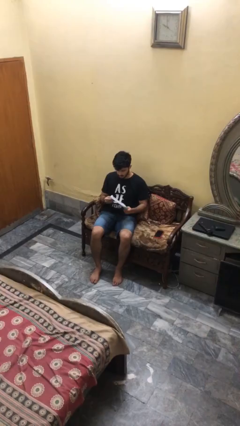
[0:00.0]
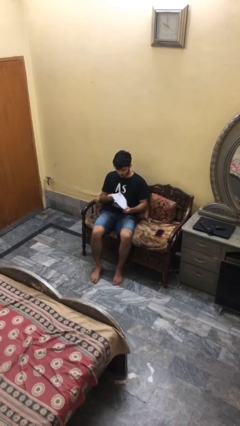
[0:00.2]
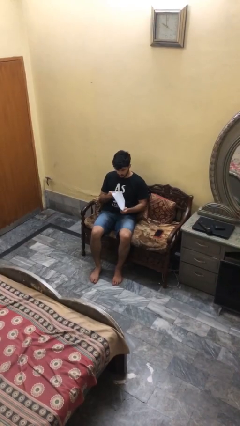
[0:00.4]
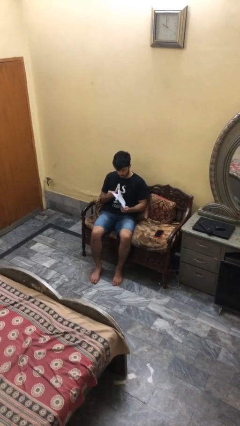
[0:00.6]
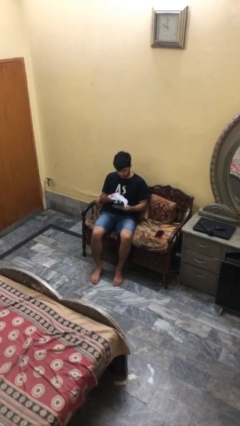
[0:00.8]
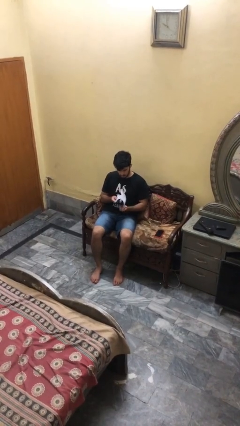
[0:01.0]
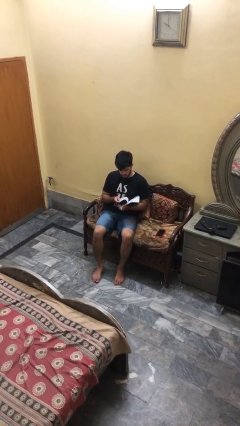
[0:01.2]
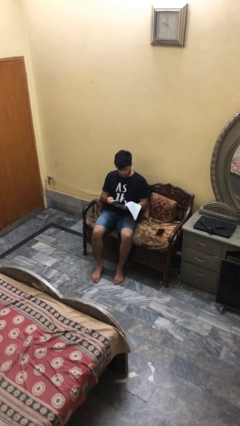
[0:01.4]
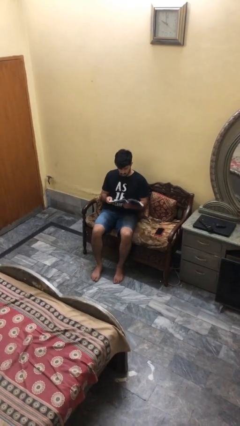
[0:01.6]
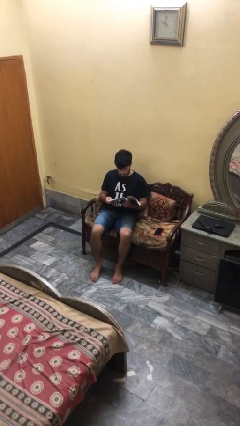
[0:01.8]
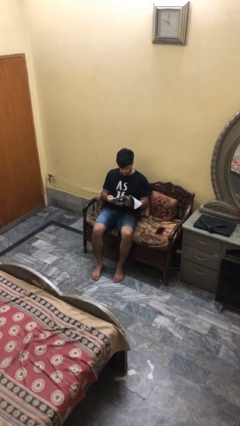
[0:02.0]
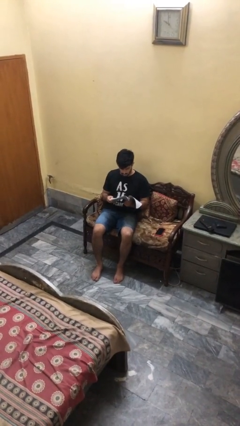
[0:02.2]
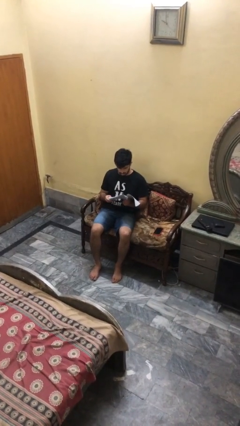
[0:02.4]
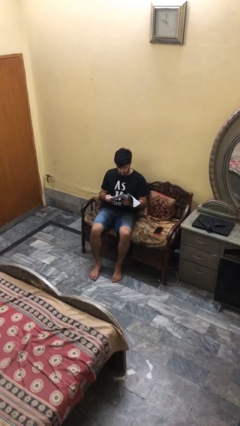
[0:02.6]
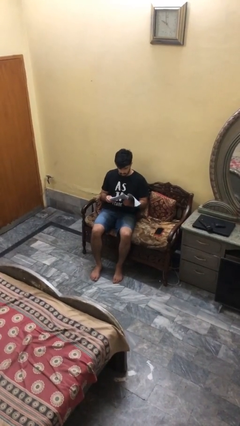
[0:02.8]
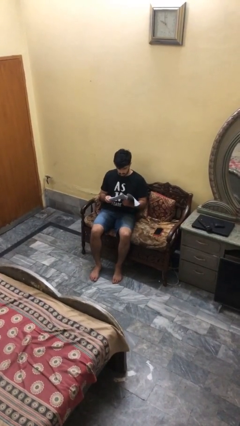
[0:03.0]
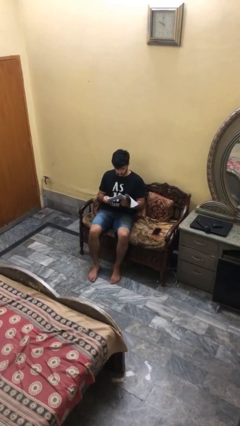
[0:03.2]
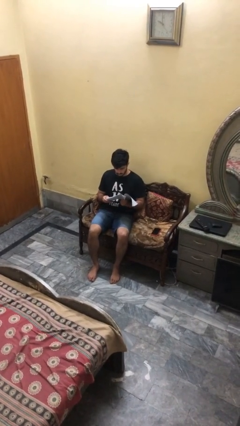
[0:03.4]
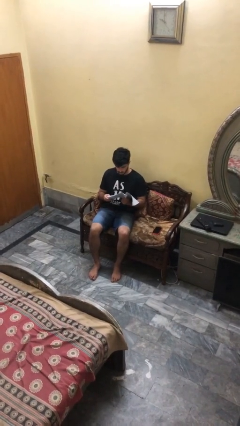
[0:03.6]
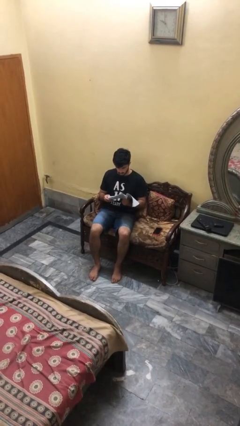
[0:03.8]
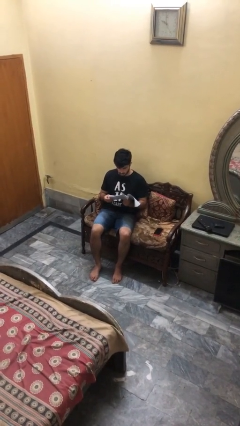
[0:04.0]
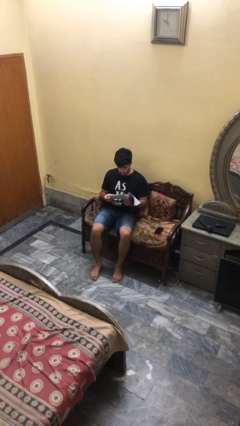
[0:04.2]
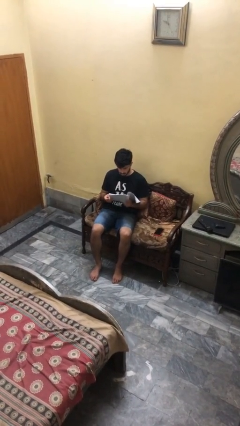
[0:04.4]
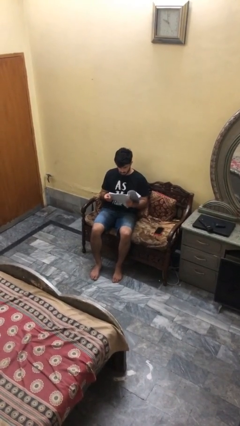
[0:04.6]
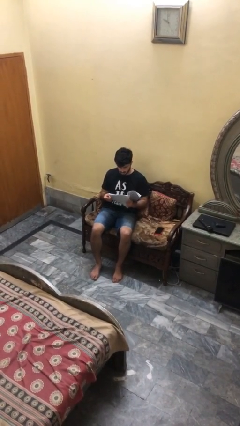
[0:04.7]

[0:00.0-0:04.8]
person reads magazine

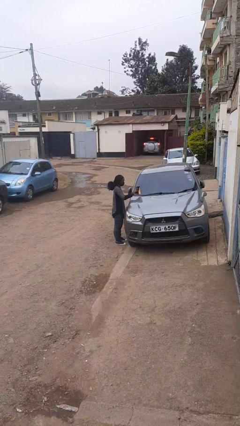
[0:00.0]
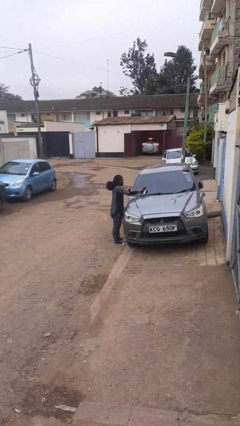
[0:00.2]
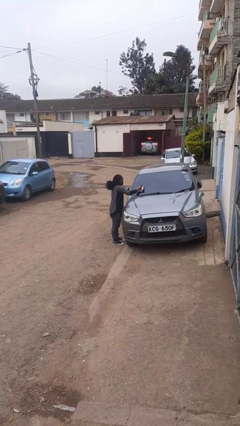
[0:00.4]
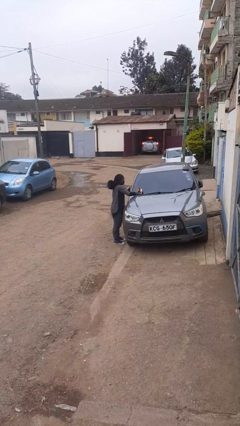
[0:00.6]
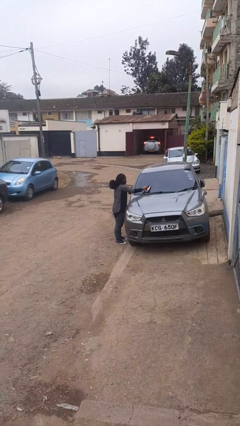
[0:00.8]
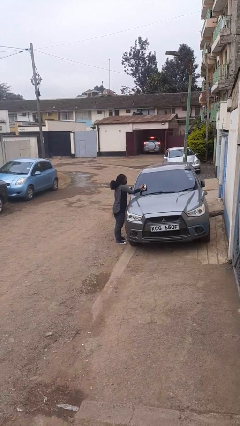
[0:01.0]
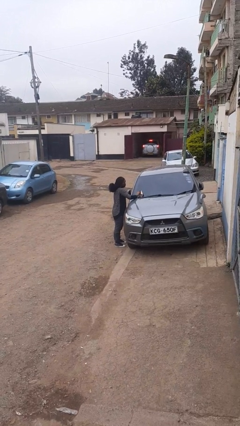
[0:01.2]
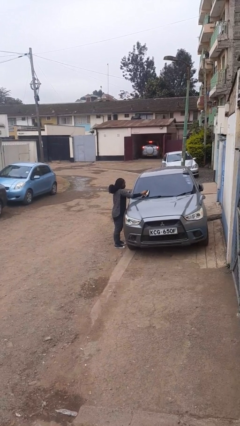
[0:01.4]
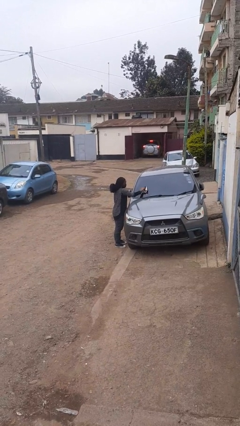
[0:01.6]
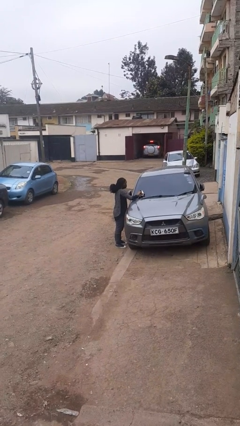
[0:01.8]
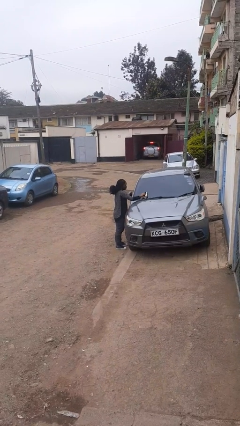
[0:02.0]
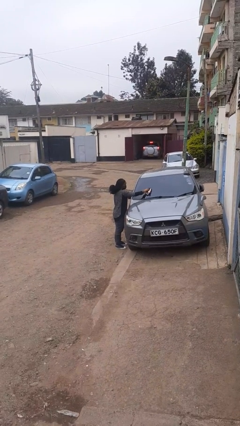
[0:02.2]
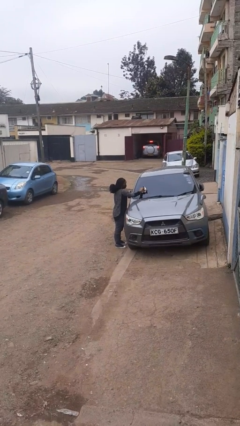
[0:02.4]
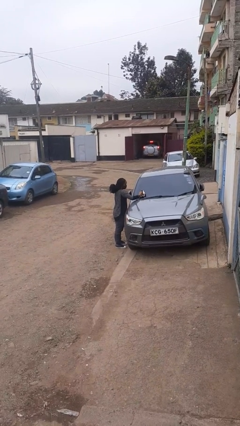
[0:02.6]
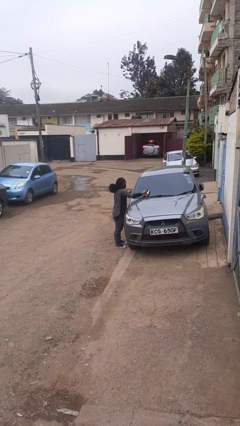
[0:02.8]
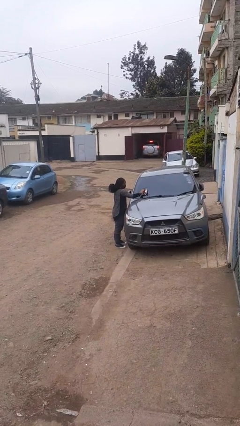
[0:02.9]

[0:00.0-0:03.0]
person polishes car with rag

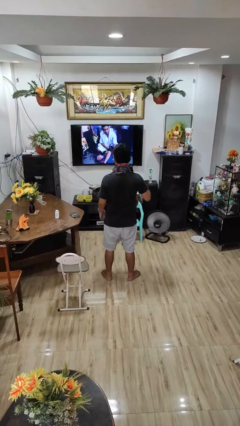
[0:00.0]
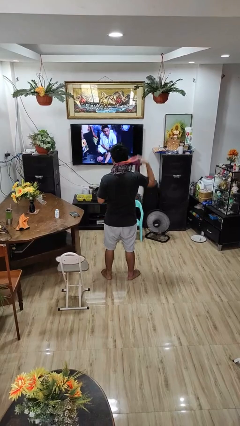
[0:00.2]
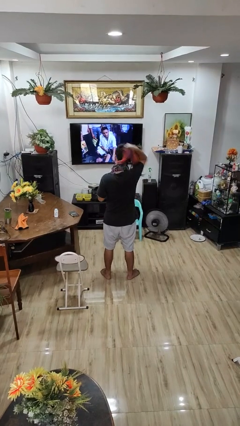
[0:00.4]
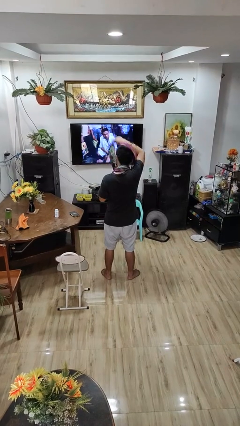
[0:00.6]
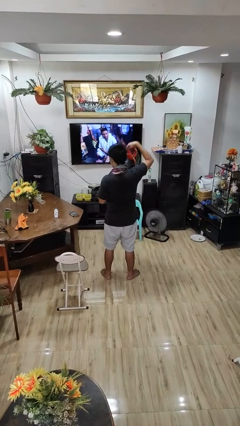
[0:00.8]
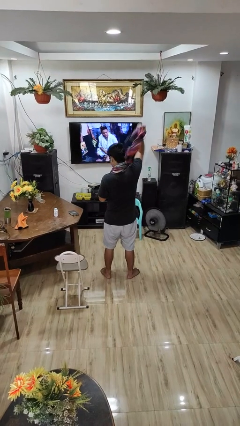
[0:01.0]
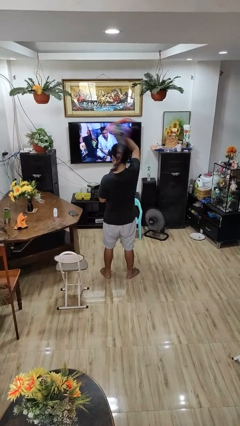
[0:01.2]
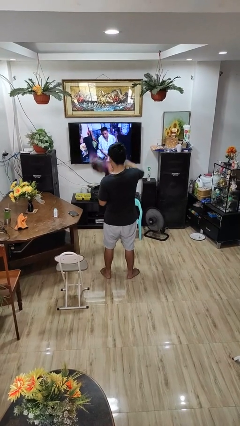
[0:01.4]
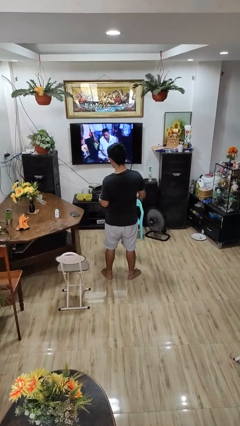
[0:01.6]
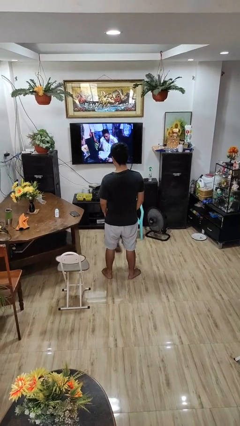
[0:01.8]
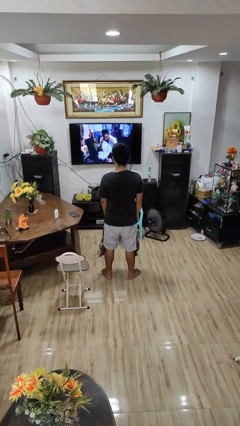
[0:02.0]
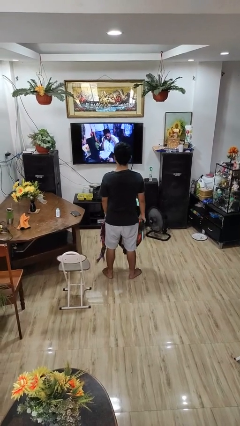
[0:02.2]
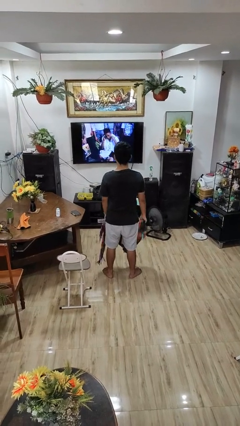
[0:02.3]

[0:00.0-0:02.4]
person takes off scarf

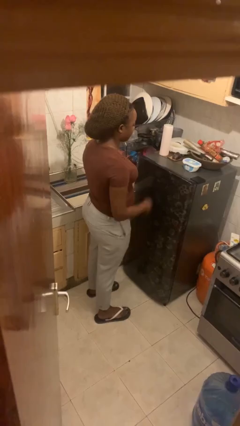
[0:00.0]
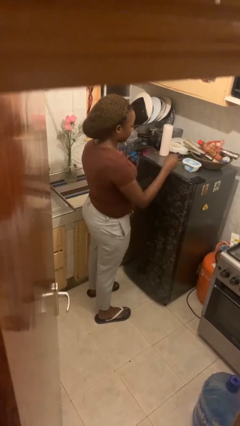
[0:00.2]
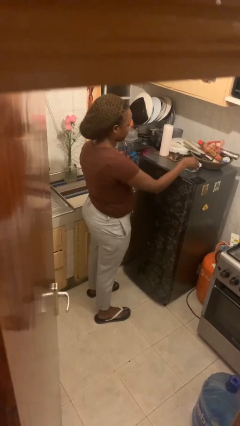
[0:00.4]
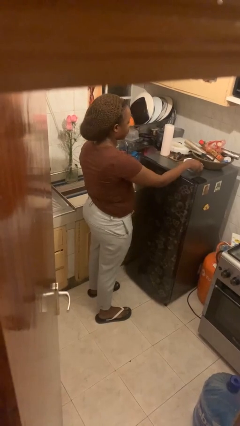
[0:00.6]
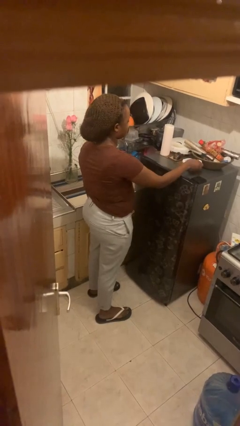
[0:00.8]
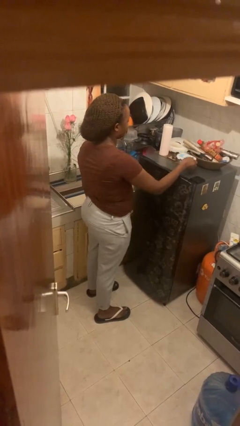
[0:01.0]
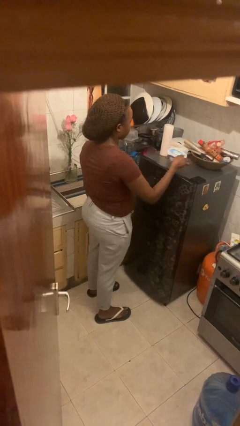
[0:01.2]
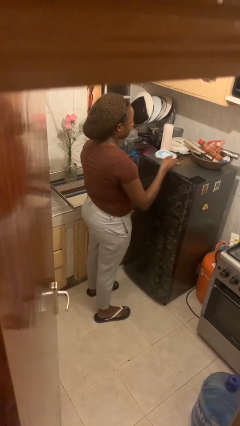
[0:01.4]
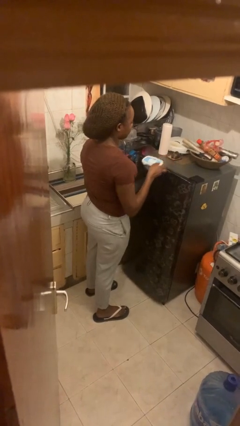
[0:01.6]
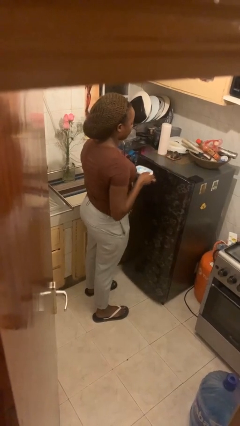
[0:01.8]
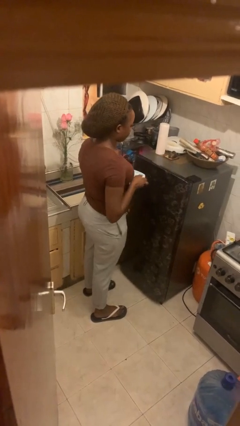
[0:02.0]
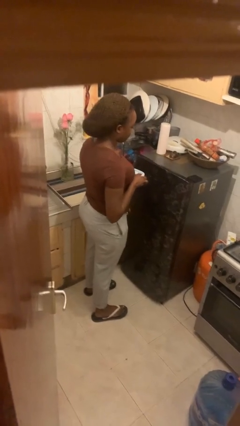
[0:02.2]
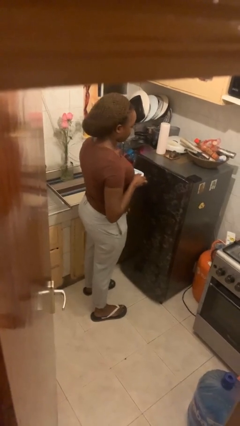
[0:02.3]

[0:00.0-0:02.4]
person picks up object from countertop

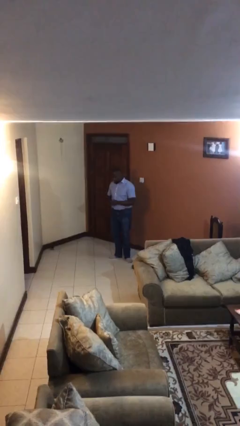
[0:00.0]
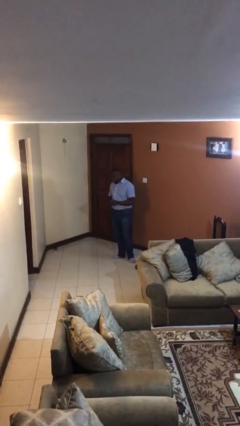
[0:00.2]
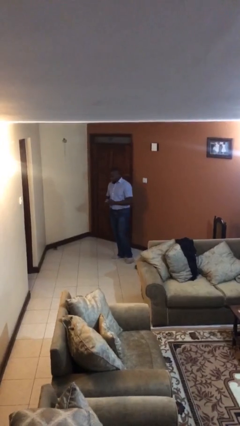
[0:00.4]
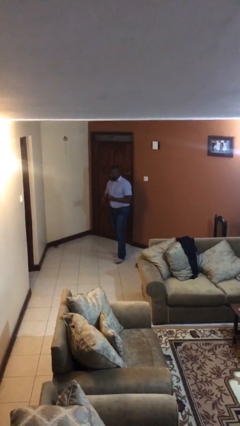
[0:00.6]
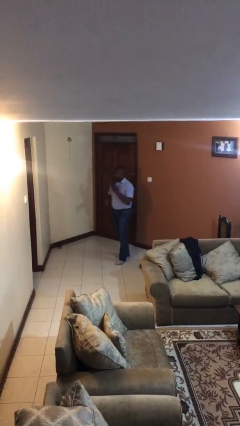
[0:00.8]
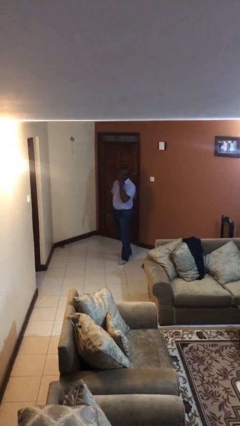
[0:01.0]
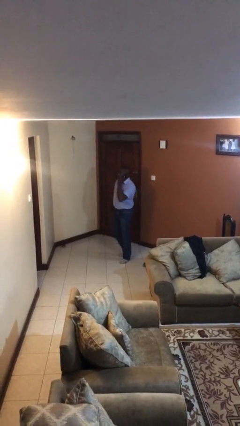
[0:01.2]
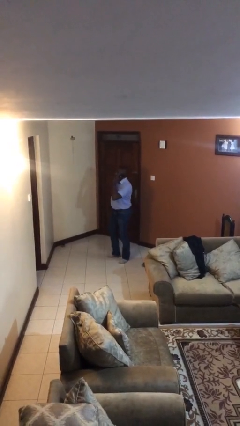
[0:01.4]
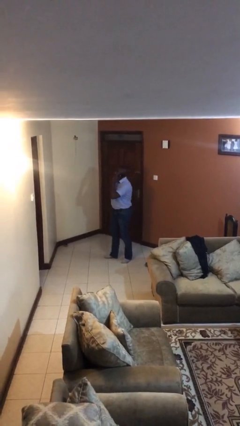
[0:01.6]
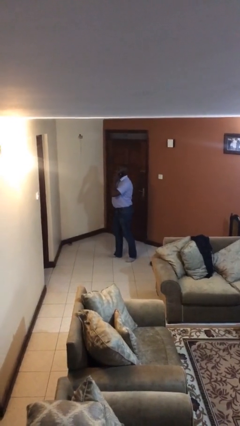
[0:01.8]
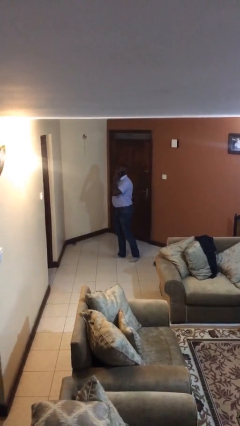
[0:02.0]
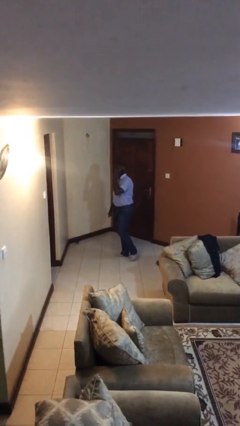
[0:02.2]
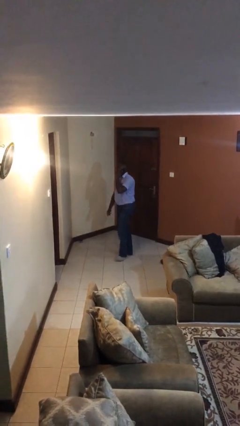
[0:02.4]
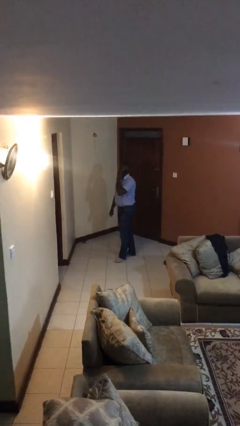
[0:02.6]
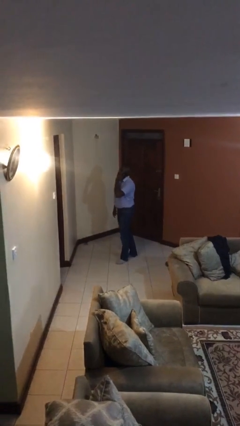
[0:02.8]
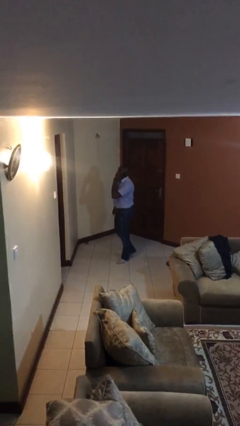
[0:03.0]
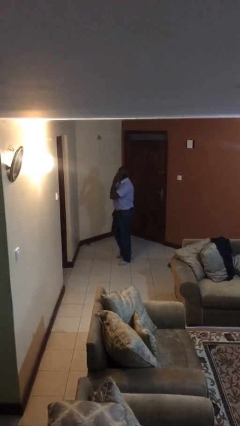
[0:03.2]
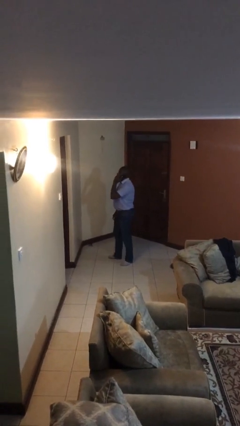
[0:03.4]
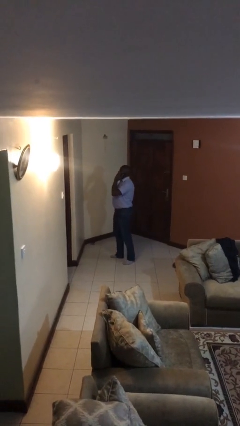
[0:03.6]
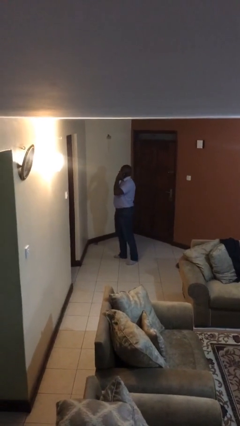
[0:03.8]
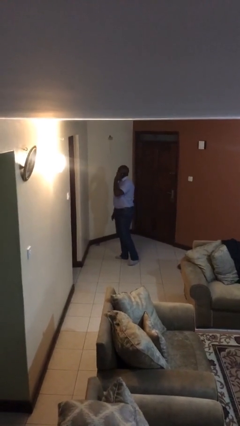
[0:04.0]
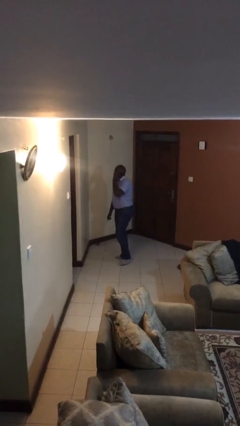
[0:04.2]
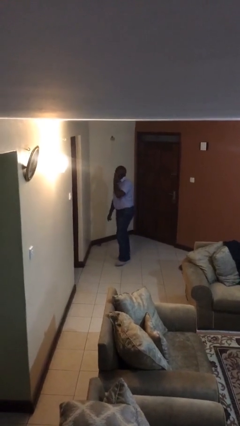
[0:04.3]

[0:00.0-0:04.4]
person talks on phone
